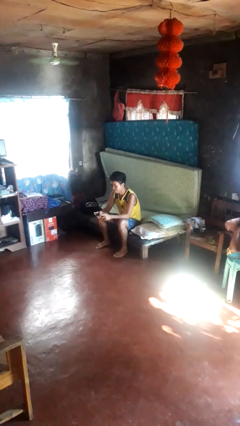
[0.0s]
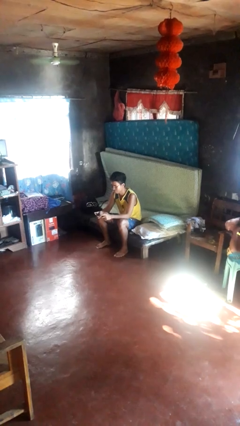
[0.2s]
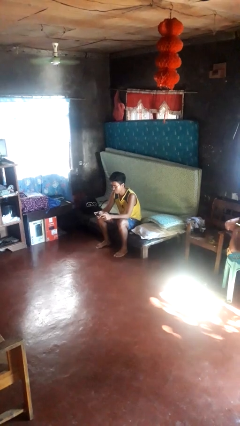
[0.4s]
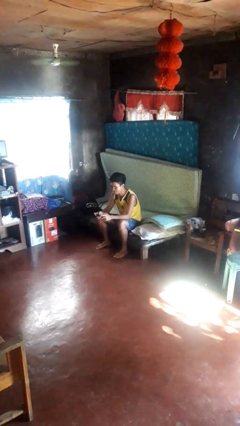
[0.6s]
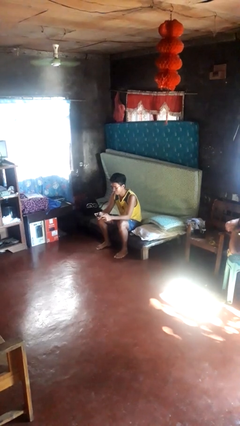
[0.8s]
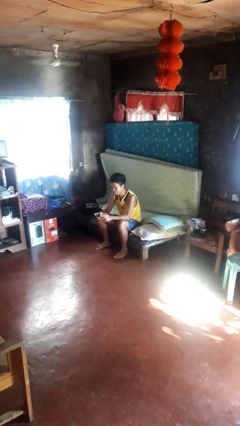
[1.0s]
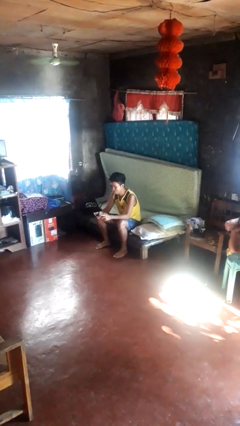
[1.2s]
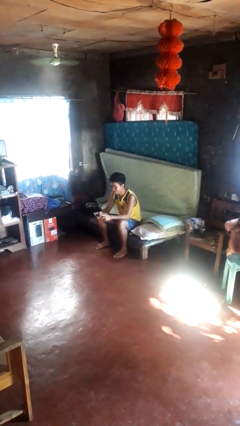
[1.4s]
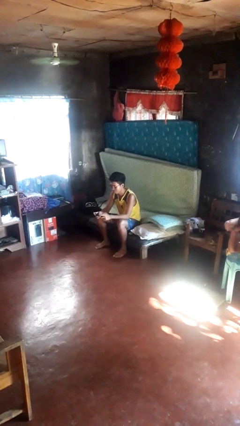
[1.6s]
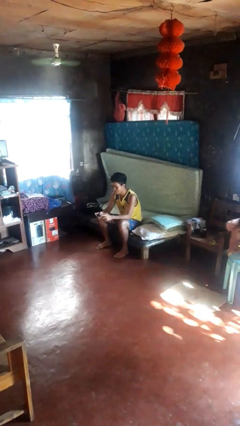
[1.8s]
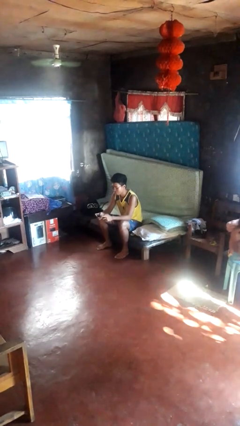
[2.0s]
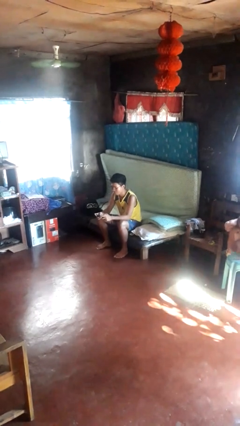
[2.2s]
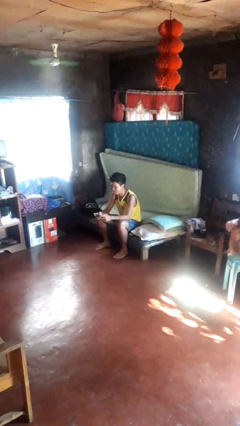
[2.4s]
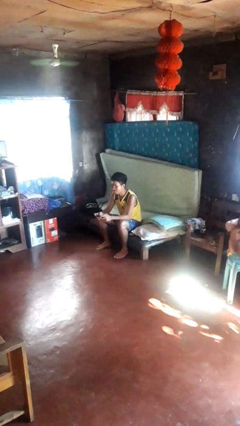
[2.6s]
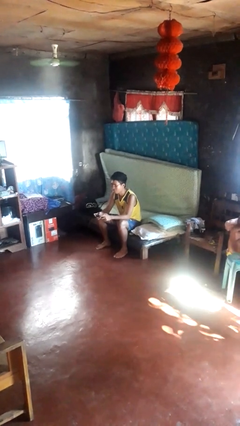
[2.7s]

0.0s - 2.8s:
person interacts with handheld game

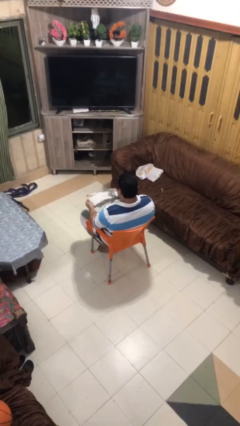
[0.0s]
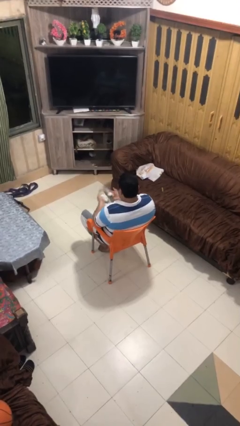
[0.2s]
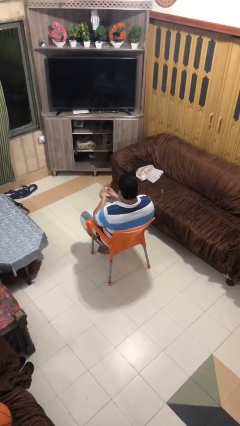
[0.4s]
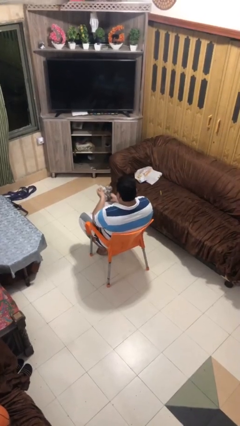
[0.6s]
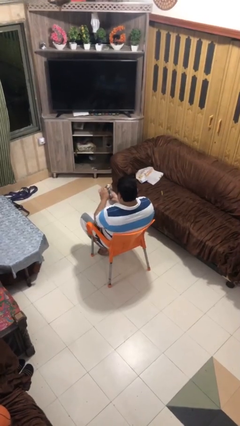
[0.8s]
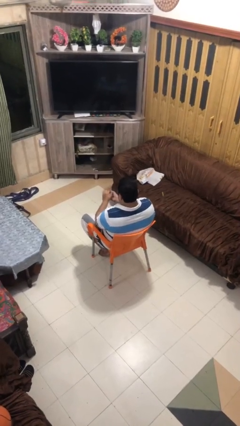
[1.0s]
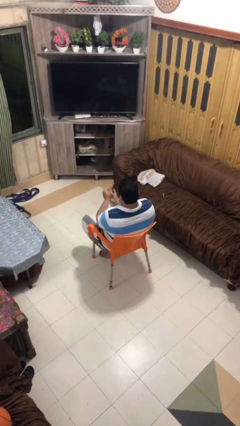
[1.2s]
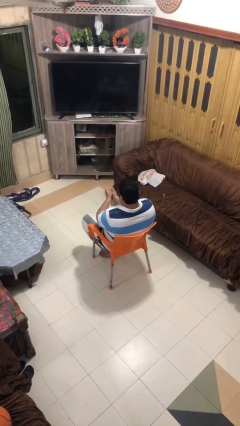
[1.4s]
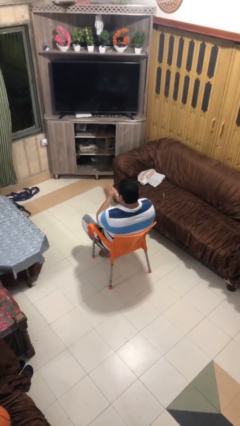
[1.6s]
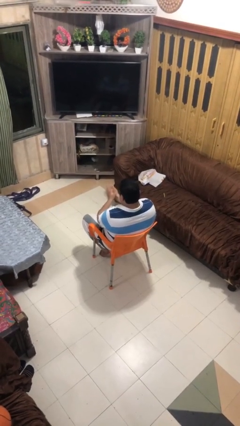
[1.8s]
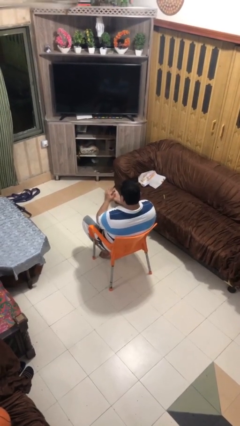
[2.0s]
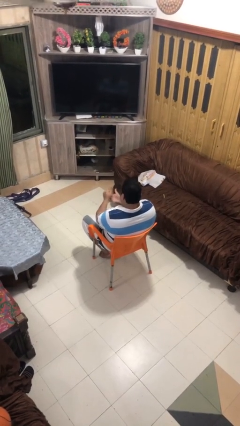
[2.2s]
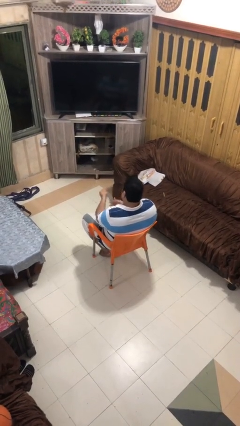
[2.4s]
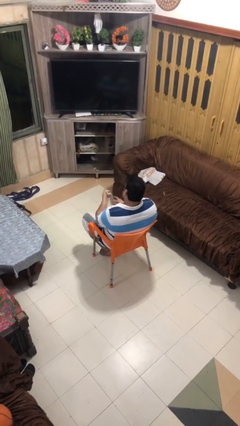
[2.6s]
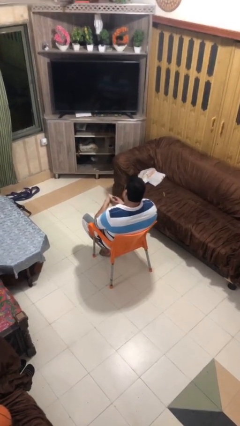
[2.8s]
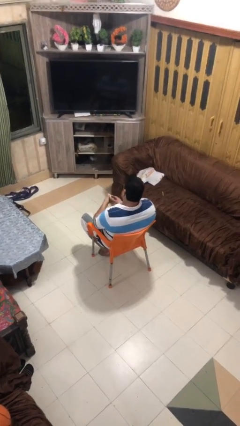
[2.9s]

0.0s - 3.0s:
person crumples paper

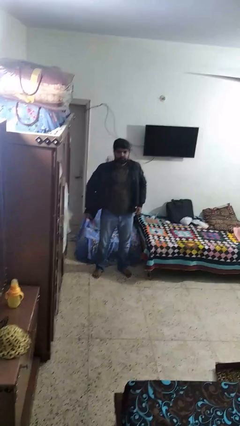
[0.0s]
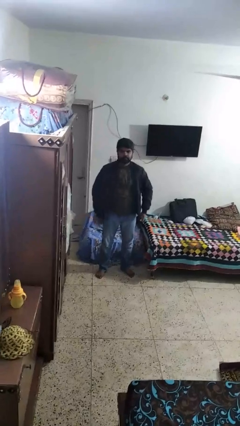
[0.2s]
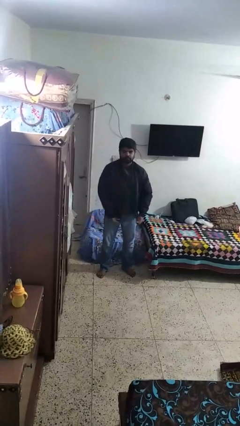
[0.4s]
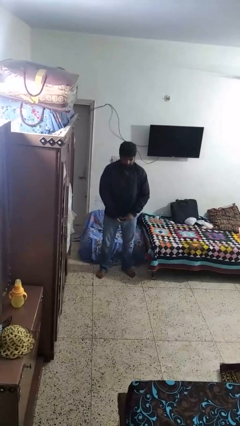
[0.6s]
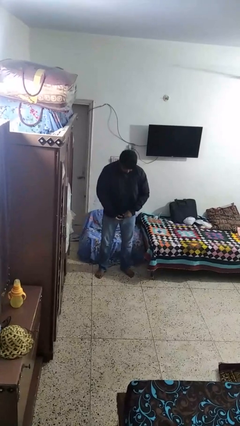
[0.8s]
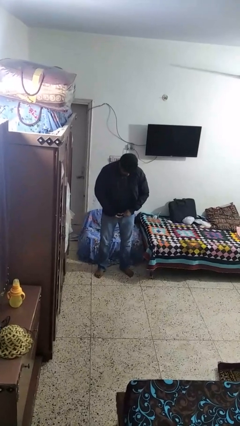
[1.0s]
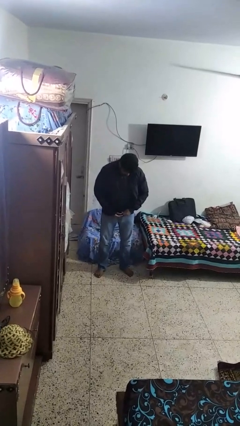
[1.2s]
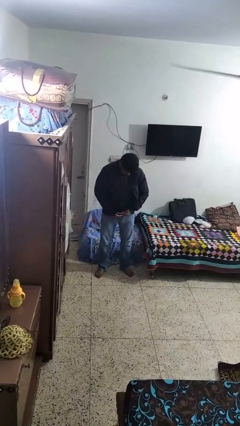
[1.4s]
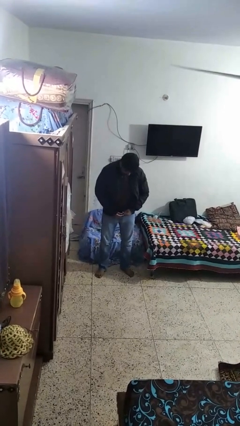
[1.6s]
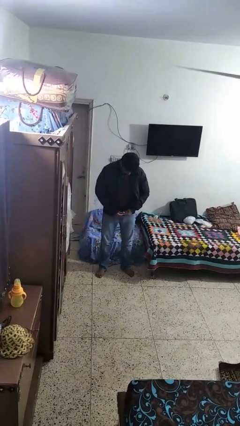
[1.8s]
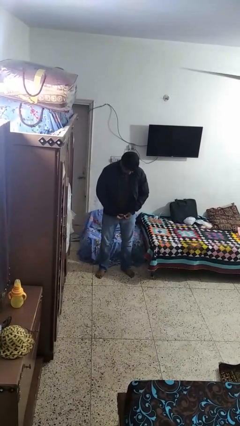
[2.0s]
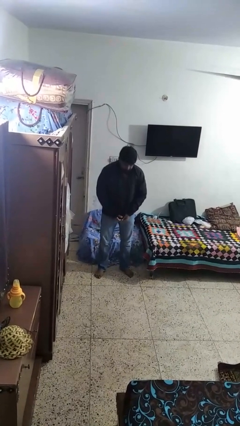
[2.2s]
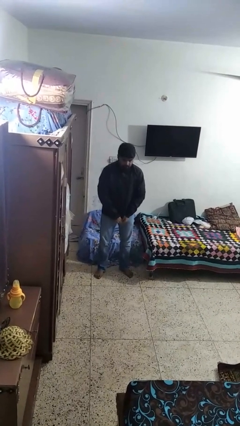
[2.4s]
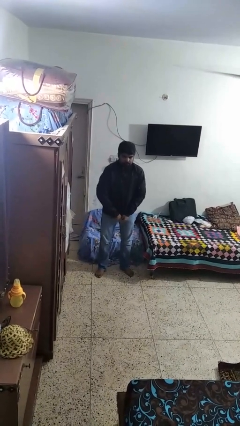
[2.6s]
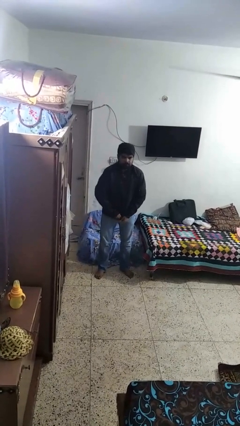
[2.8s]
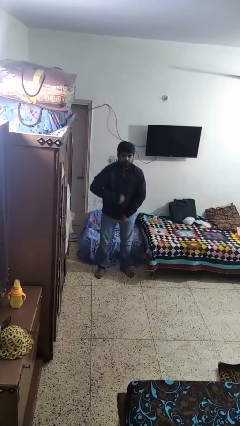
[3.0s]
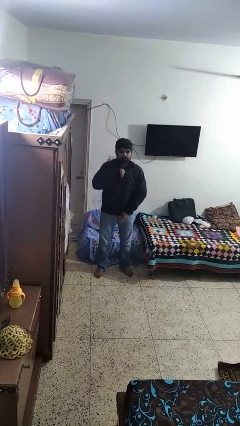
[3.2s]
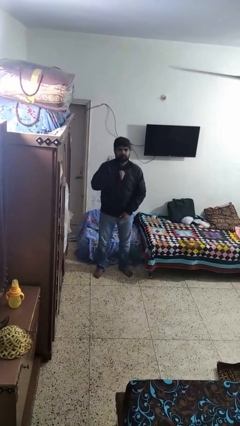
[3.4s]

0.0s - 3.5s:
person zips up jacket

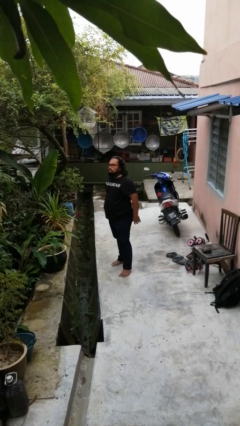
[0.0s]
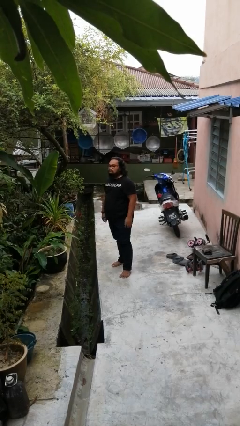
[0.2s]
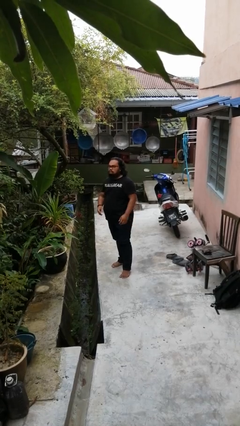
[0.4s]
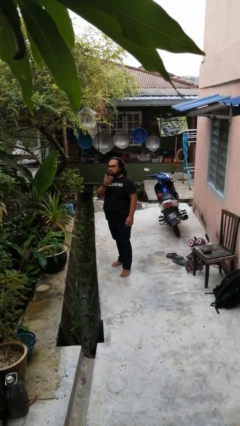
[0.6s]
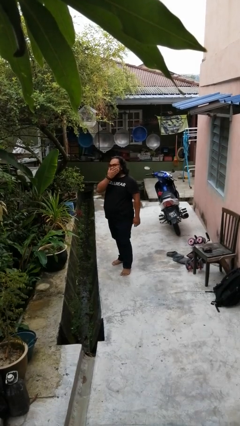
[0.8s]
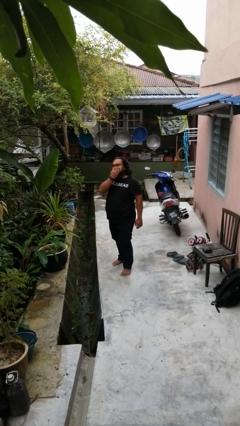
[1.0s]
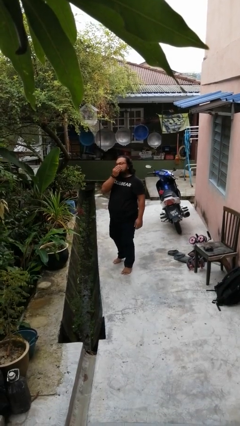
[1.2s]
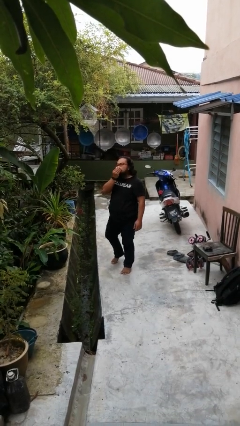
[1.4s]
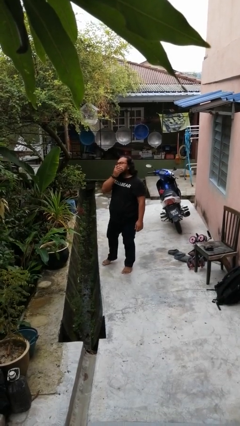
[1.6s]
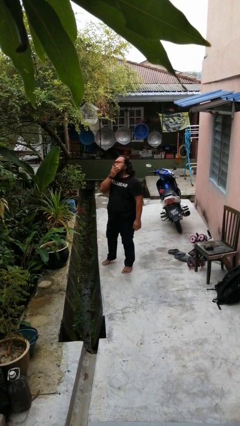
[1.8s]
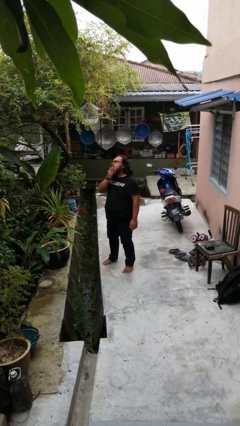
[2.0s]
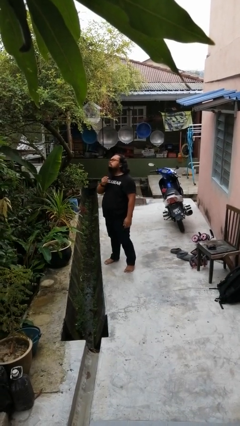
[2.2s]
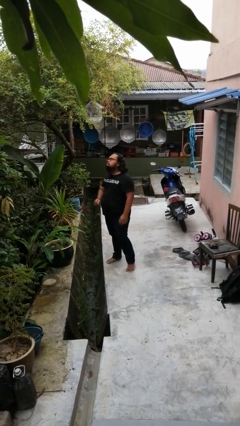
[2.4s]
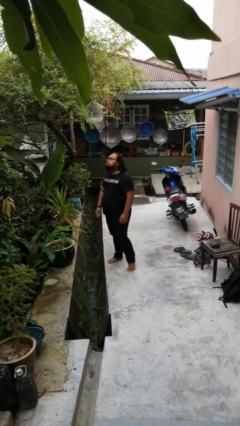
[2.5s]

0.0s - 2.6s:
person scratches face

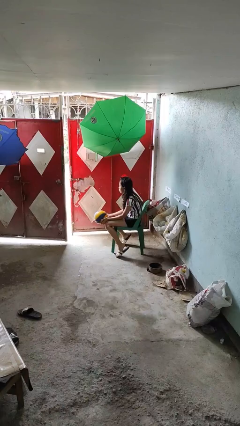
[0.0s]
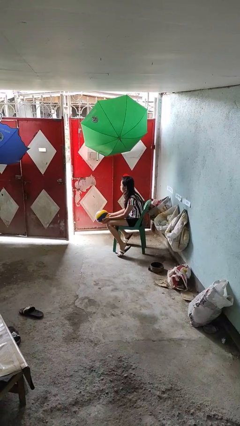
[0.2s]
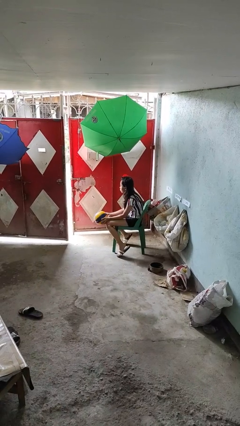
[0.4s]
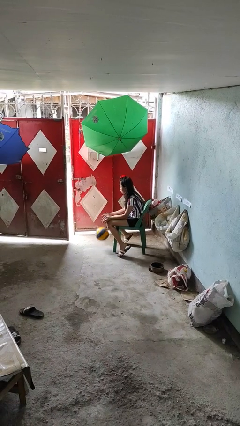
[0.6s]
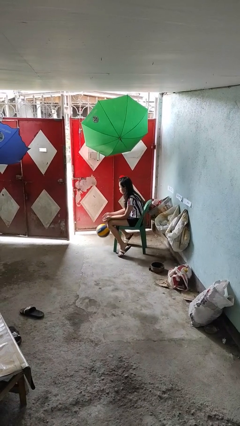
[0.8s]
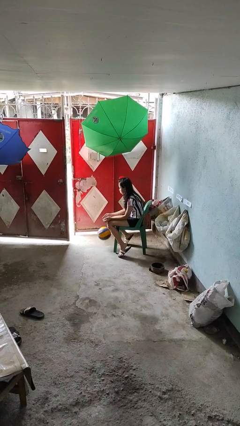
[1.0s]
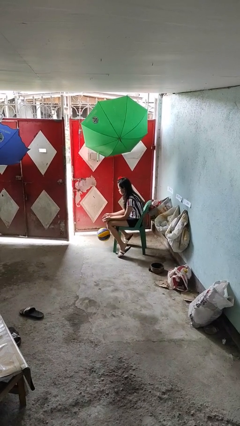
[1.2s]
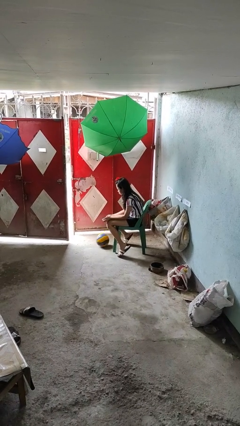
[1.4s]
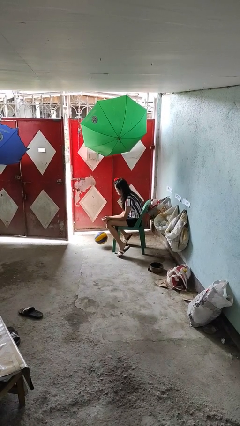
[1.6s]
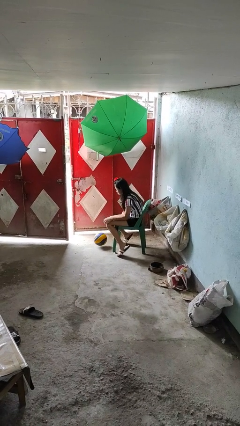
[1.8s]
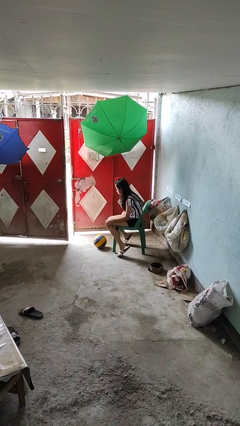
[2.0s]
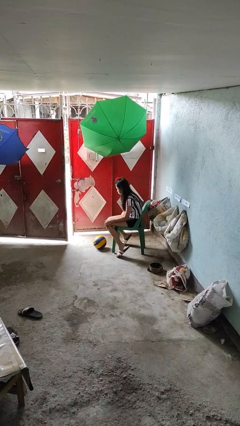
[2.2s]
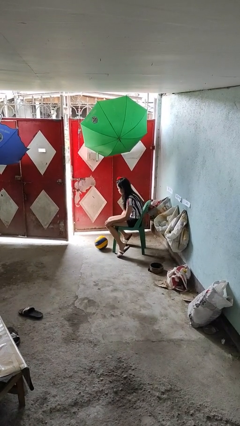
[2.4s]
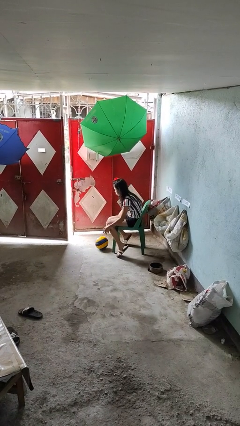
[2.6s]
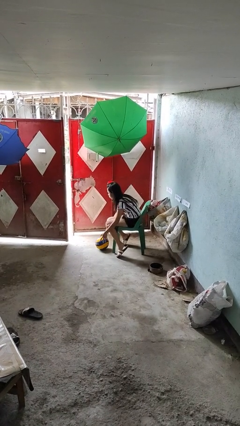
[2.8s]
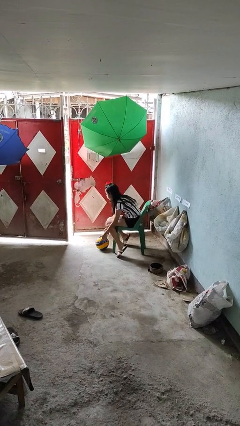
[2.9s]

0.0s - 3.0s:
person drops object

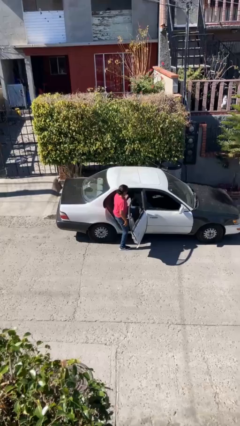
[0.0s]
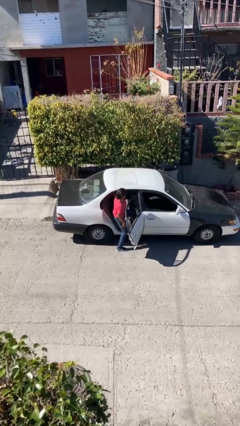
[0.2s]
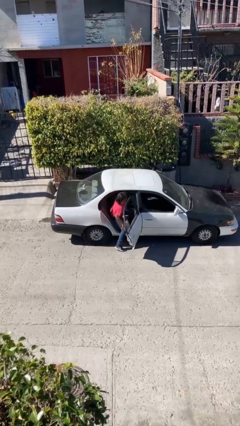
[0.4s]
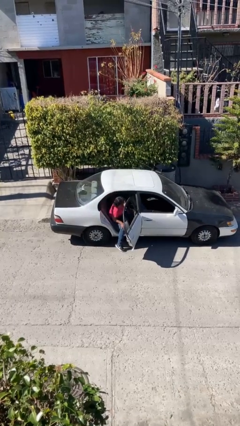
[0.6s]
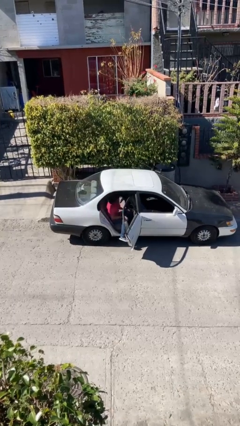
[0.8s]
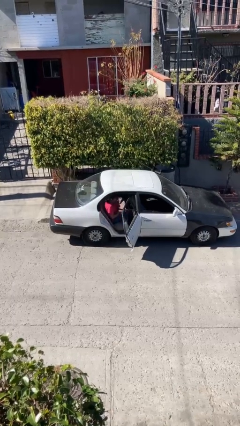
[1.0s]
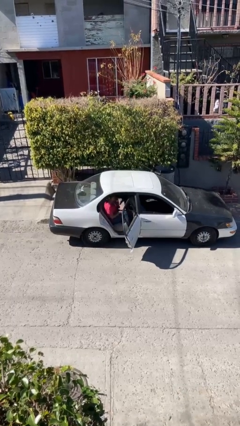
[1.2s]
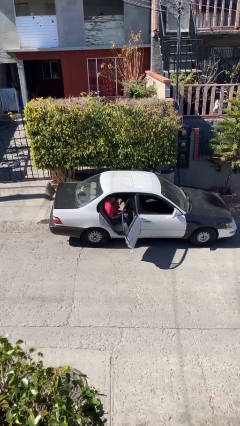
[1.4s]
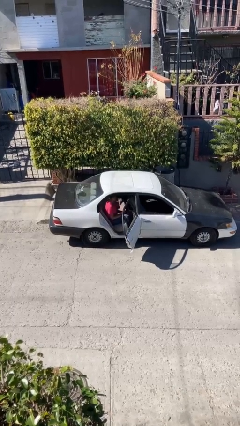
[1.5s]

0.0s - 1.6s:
person enters car

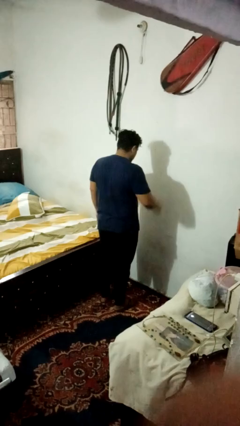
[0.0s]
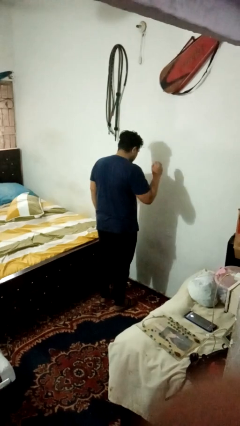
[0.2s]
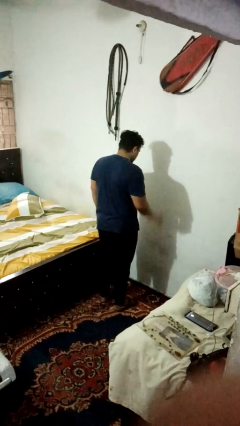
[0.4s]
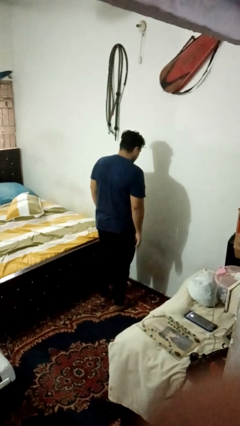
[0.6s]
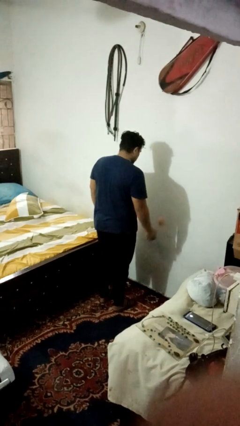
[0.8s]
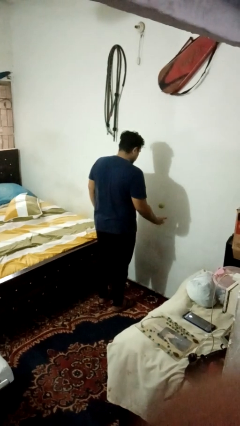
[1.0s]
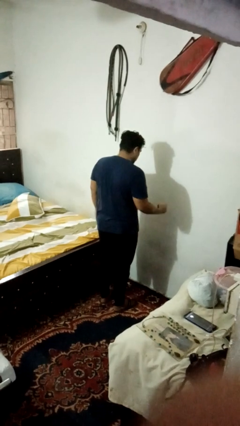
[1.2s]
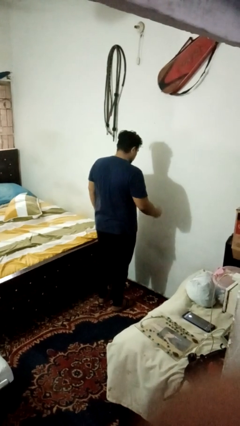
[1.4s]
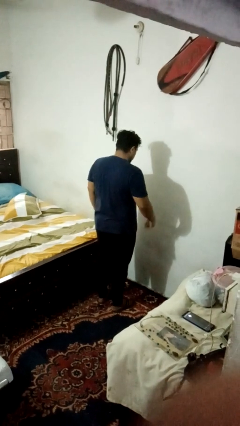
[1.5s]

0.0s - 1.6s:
person bounces ball on floor
